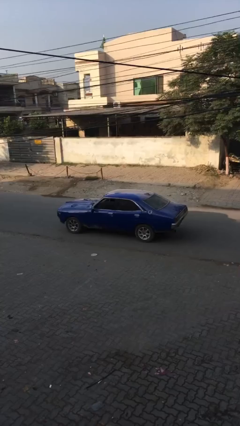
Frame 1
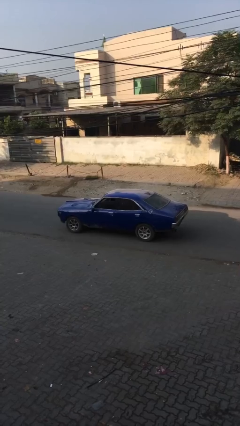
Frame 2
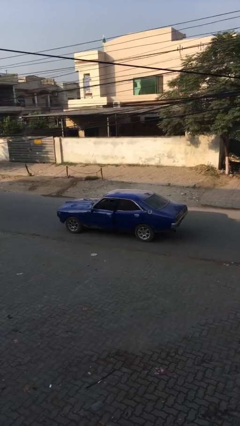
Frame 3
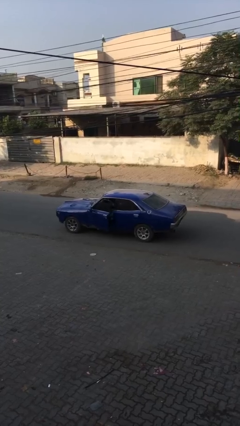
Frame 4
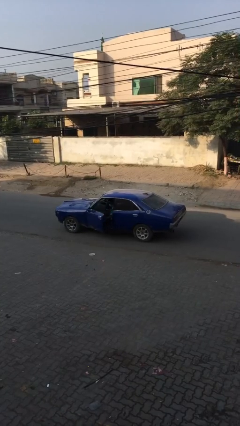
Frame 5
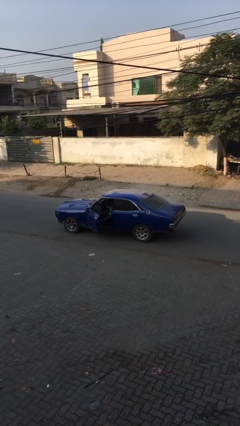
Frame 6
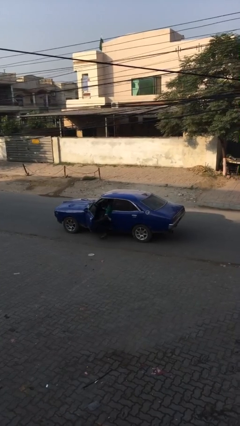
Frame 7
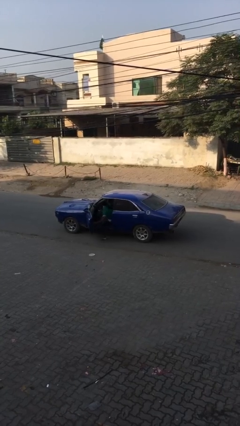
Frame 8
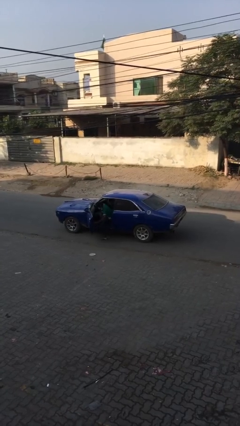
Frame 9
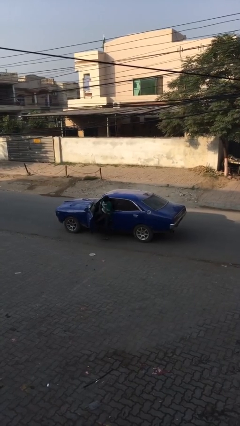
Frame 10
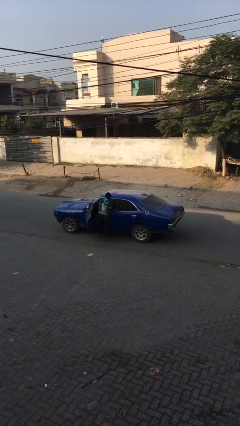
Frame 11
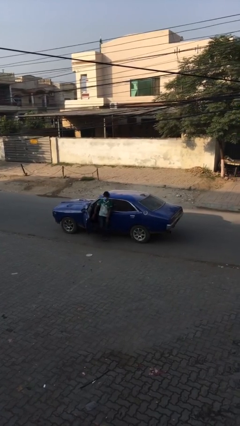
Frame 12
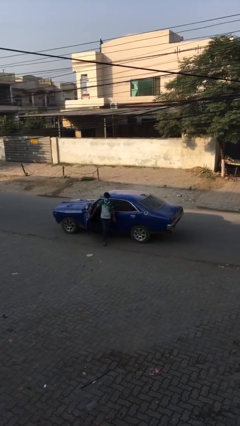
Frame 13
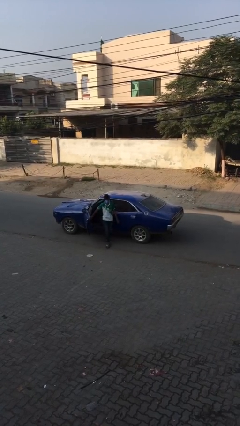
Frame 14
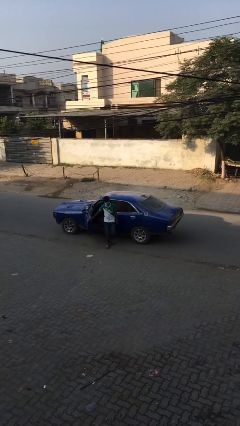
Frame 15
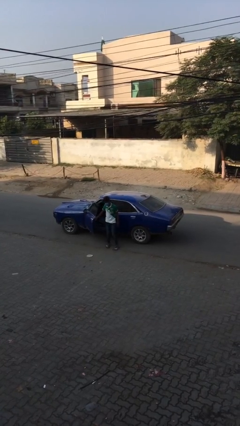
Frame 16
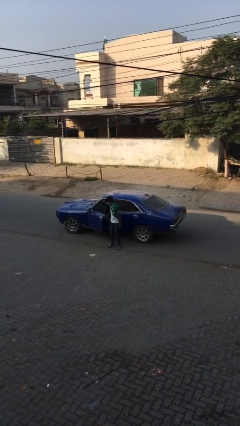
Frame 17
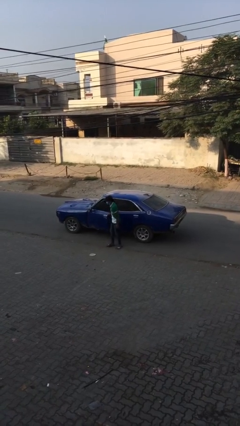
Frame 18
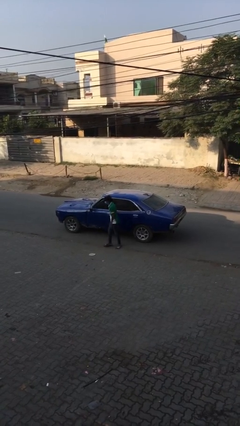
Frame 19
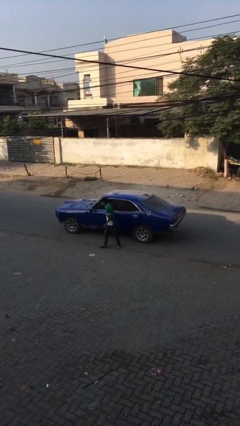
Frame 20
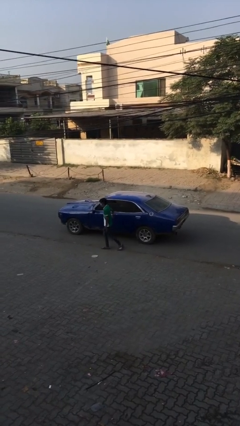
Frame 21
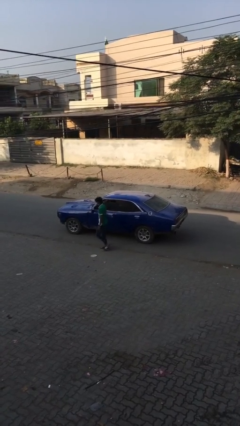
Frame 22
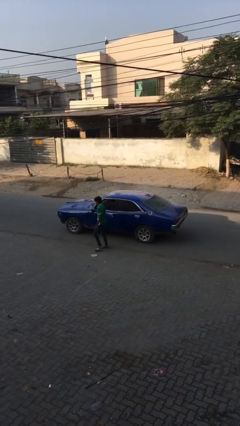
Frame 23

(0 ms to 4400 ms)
car drops off person

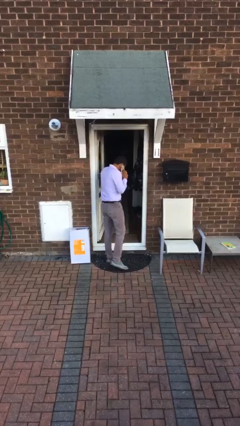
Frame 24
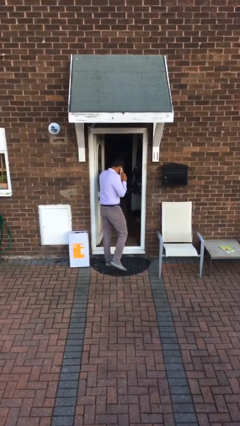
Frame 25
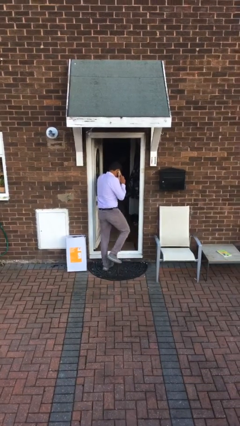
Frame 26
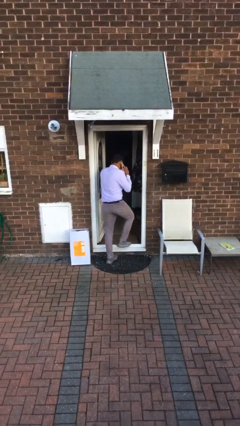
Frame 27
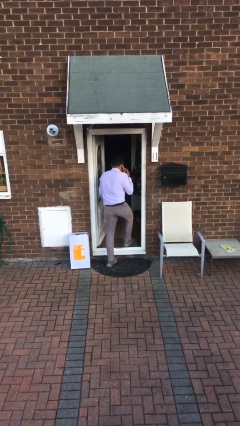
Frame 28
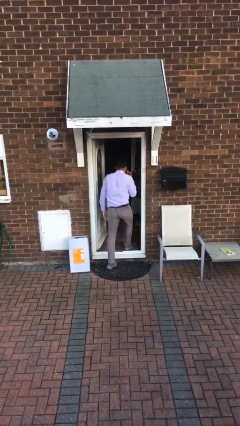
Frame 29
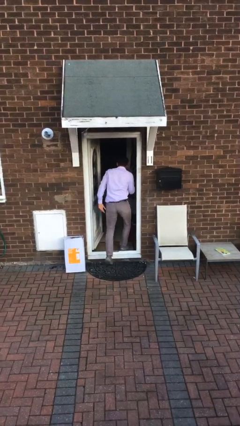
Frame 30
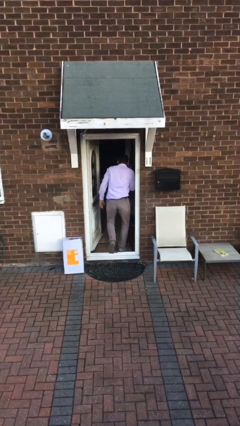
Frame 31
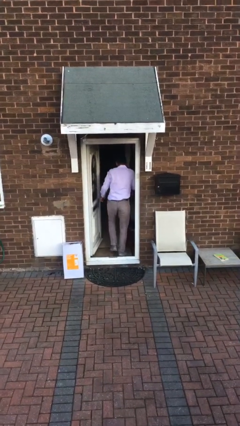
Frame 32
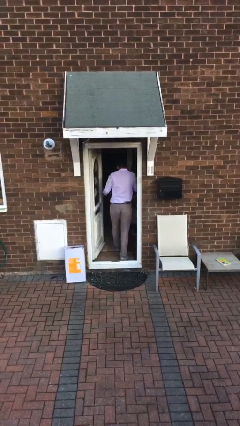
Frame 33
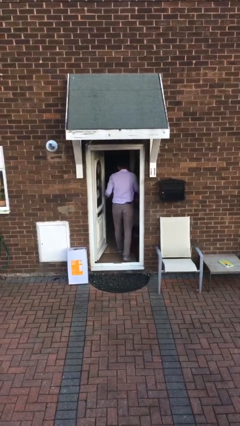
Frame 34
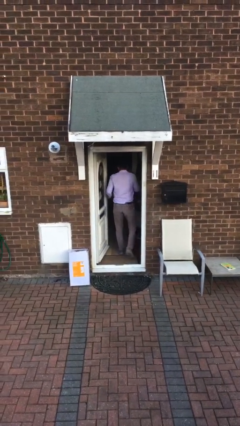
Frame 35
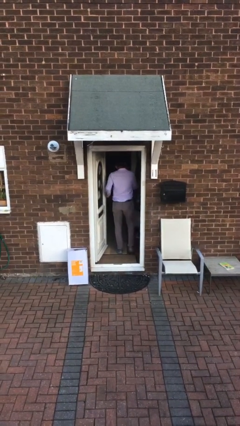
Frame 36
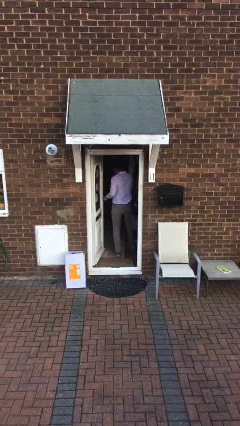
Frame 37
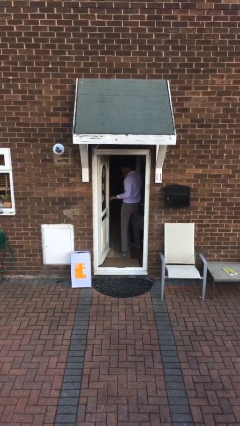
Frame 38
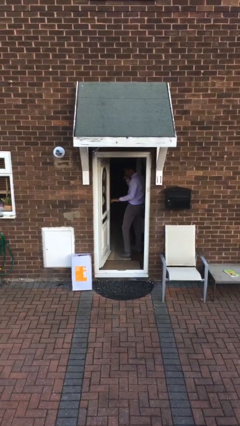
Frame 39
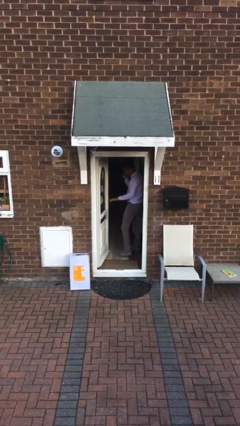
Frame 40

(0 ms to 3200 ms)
person exits scene through structure

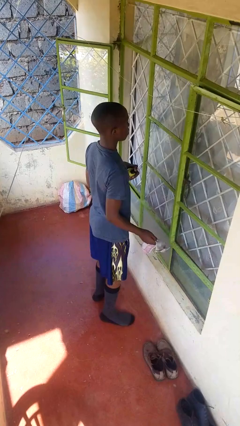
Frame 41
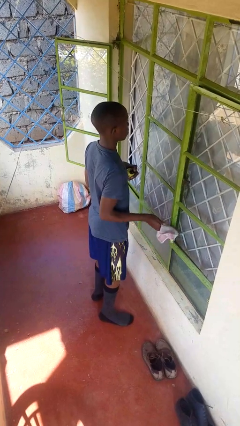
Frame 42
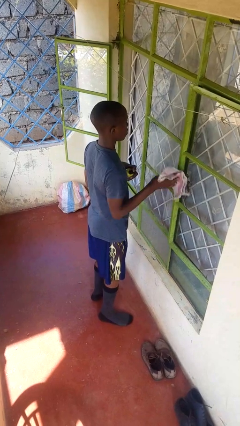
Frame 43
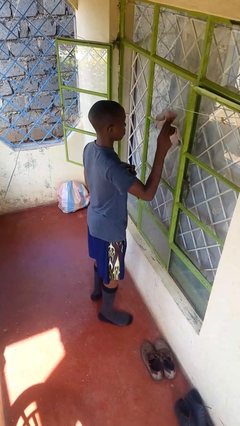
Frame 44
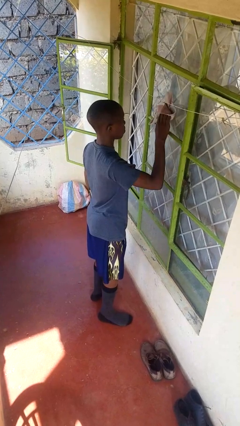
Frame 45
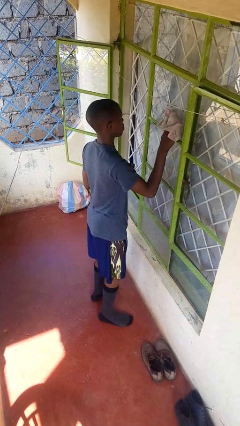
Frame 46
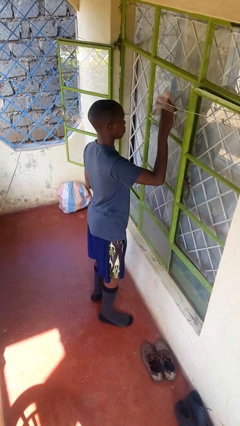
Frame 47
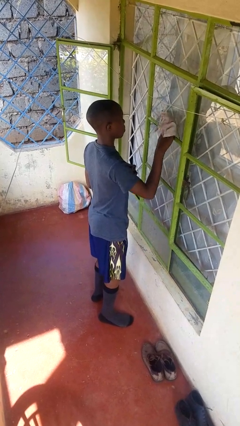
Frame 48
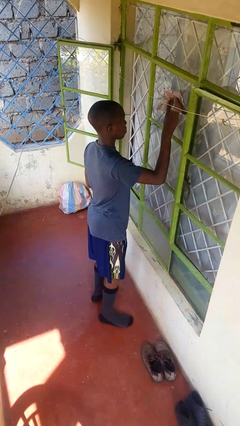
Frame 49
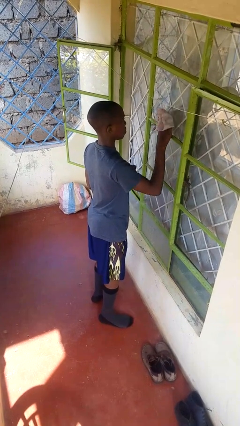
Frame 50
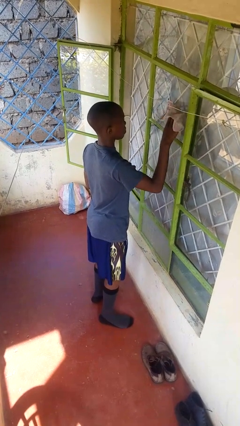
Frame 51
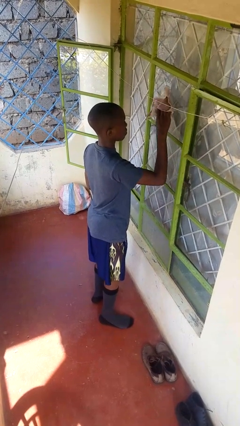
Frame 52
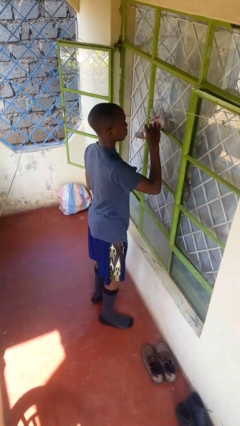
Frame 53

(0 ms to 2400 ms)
person washes window

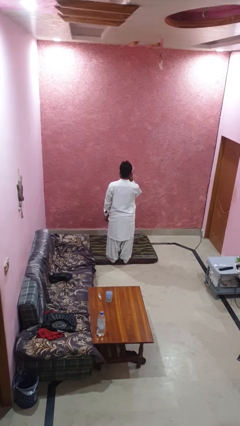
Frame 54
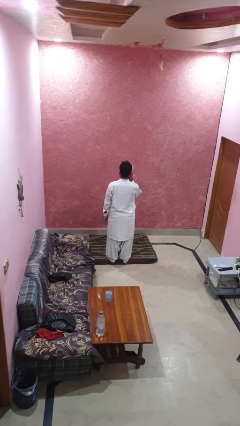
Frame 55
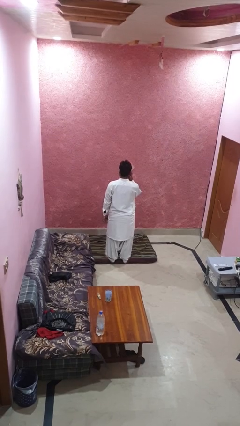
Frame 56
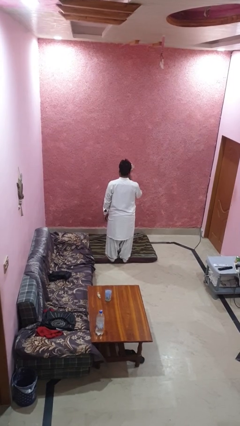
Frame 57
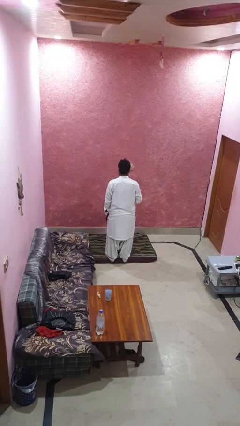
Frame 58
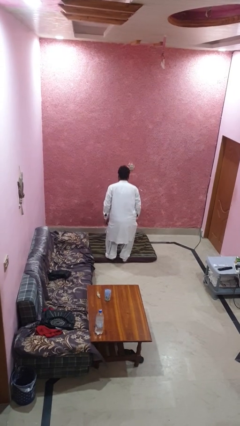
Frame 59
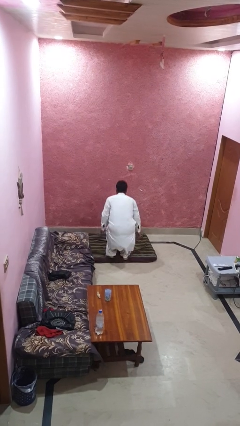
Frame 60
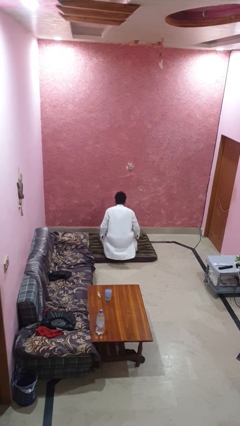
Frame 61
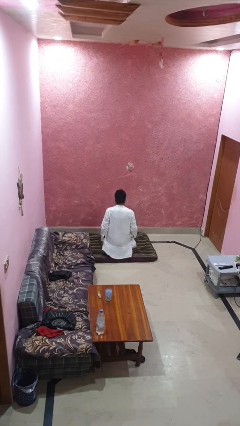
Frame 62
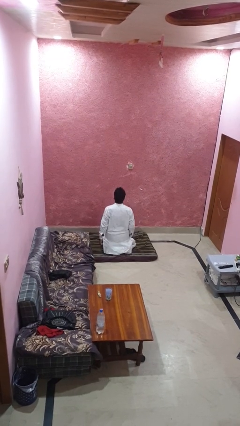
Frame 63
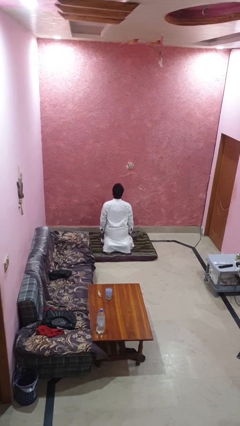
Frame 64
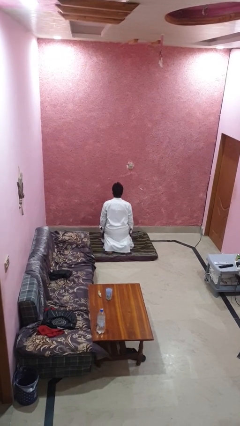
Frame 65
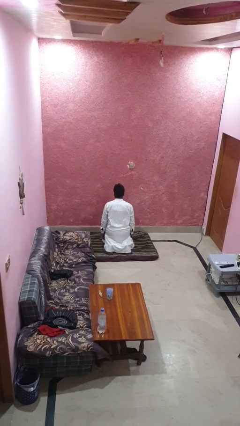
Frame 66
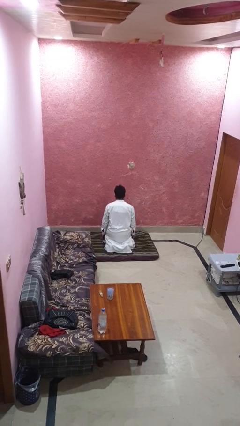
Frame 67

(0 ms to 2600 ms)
person kneels

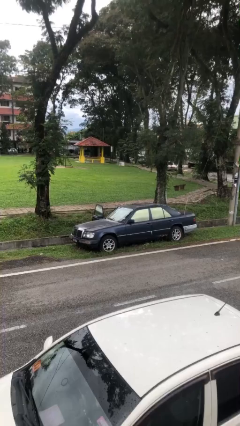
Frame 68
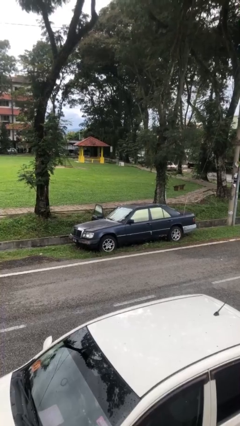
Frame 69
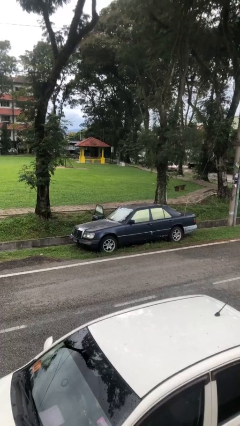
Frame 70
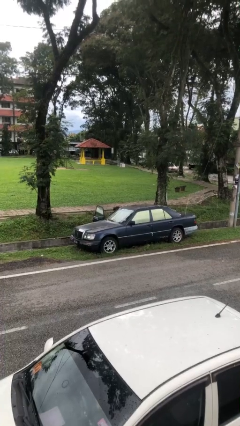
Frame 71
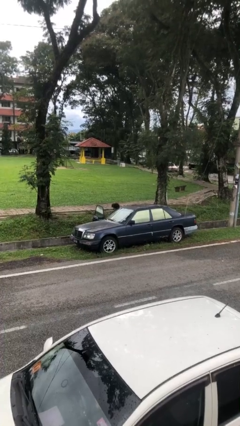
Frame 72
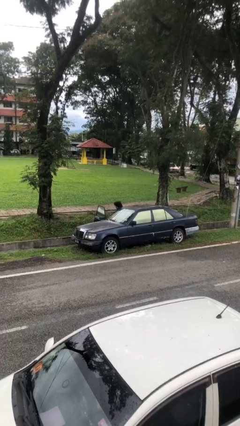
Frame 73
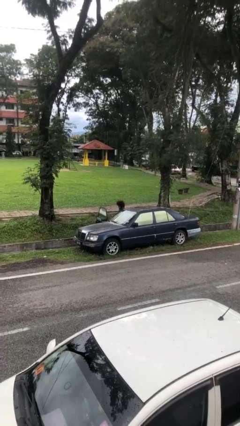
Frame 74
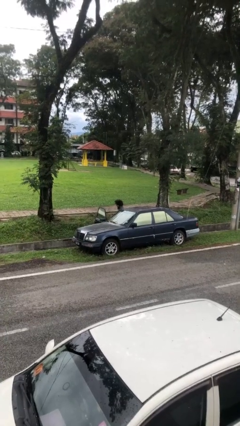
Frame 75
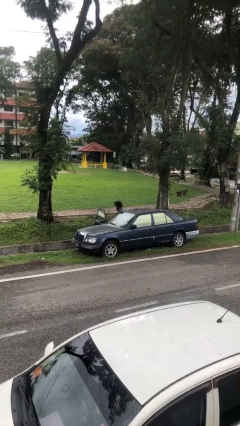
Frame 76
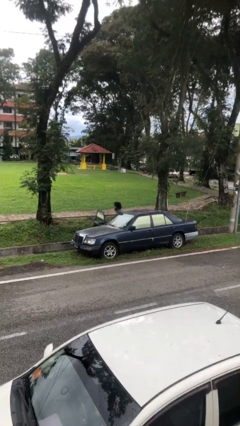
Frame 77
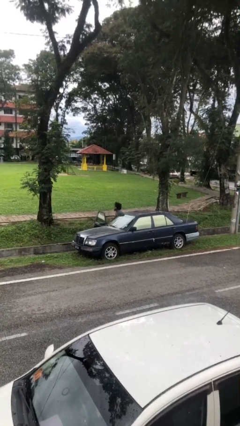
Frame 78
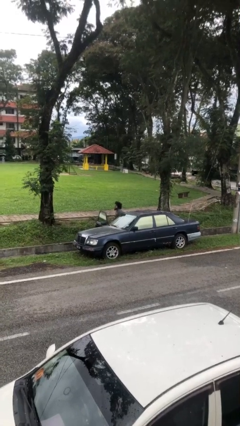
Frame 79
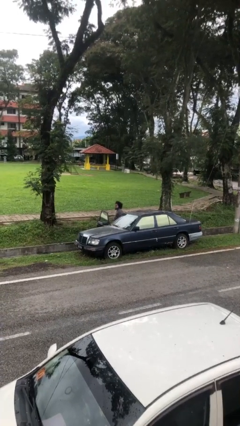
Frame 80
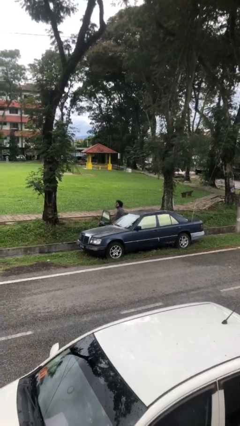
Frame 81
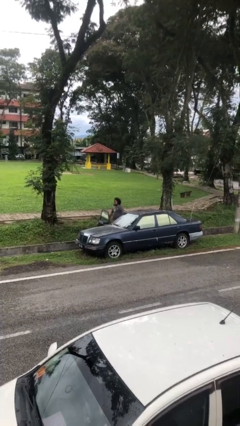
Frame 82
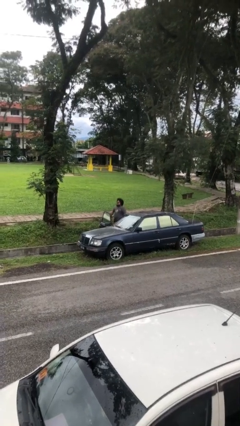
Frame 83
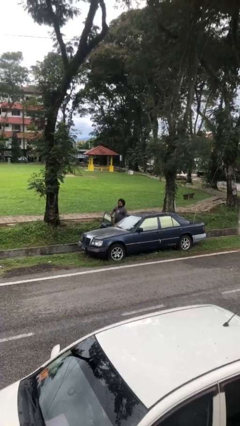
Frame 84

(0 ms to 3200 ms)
person exits car

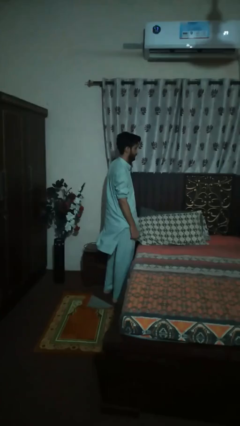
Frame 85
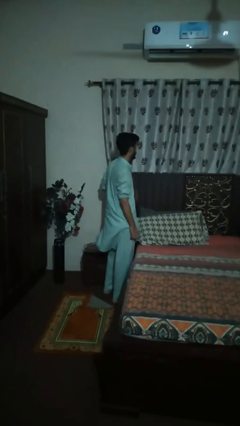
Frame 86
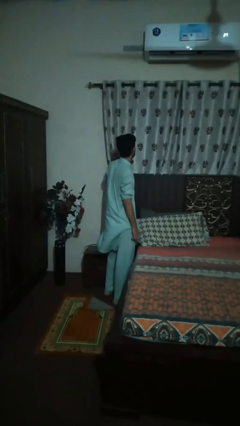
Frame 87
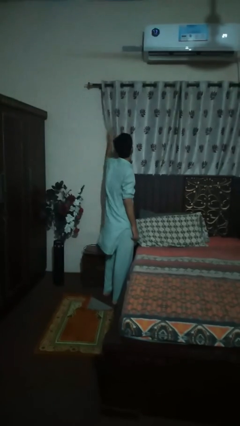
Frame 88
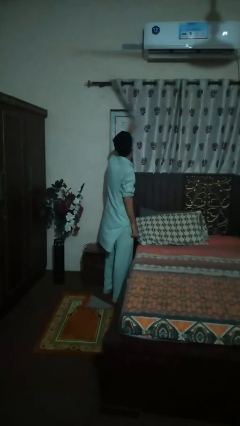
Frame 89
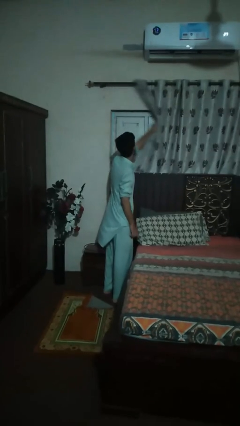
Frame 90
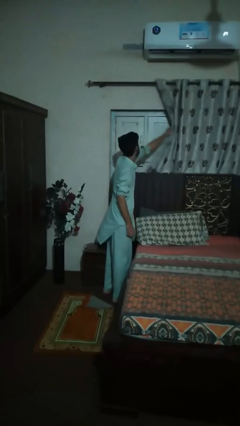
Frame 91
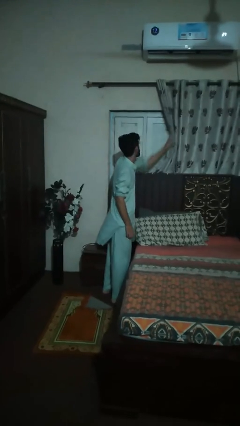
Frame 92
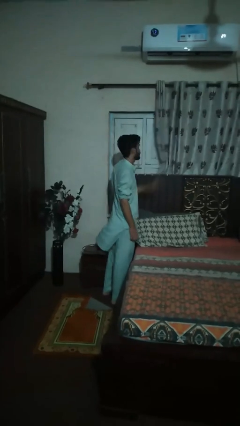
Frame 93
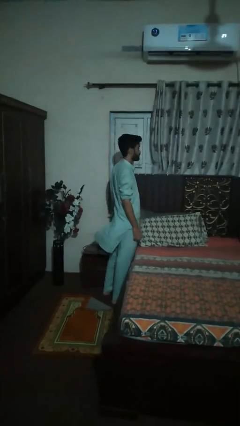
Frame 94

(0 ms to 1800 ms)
person opens curtains
